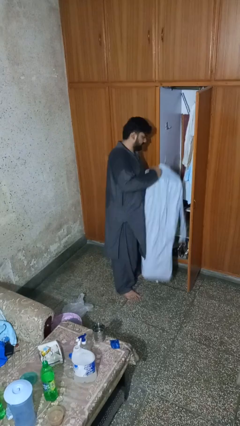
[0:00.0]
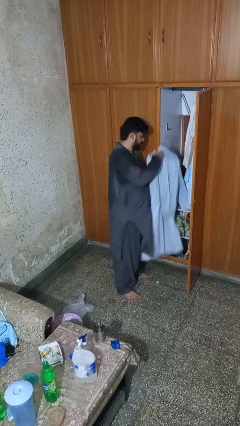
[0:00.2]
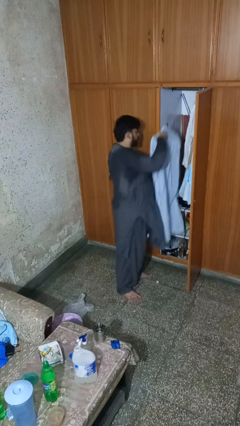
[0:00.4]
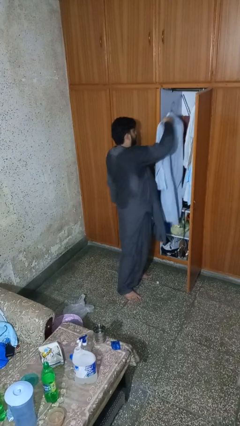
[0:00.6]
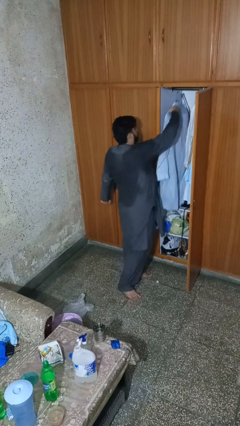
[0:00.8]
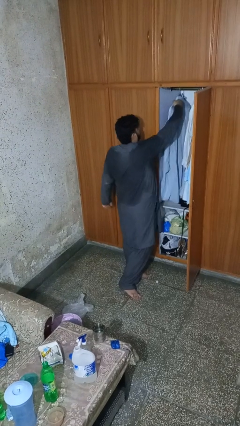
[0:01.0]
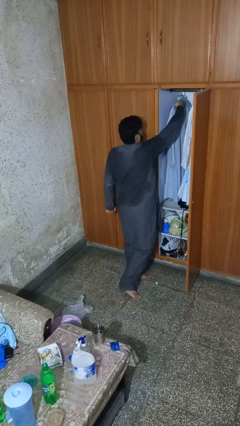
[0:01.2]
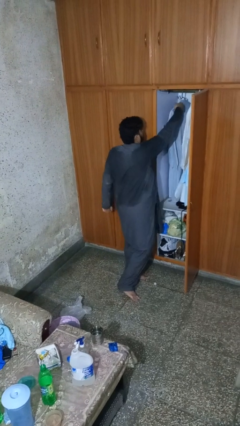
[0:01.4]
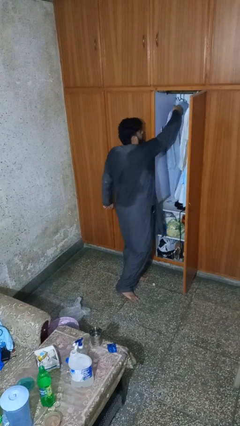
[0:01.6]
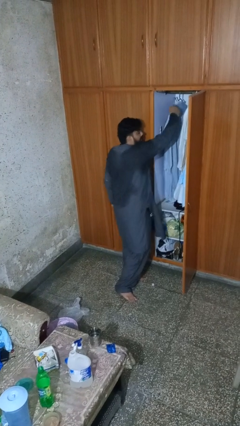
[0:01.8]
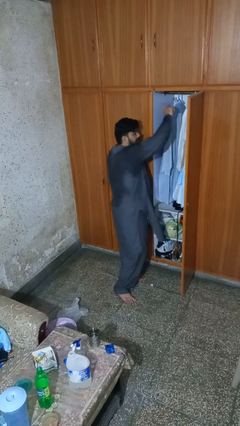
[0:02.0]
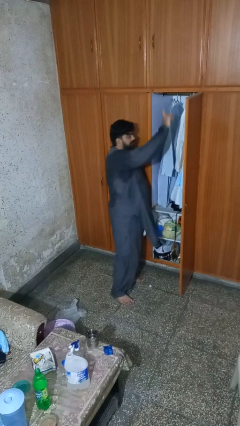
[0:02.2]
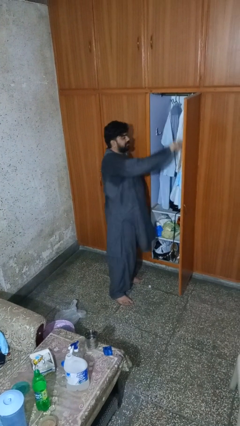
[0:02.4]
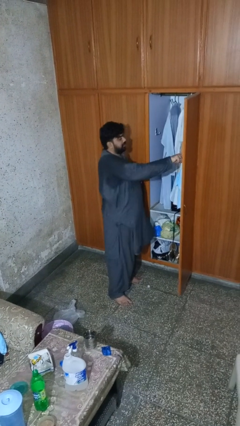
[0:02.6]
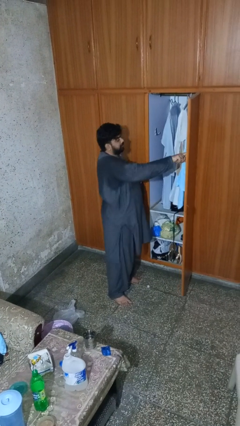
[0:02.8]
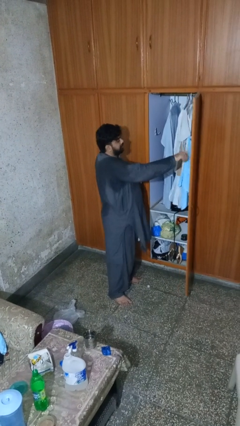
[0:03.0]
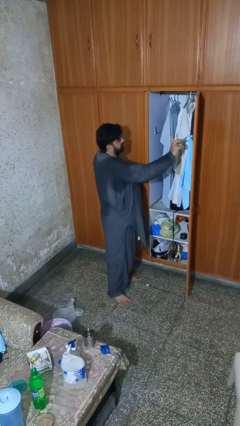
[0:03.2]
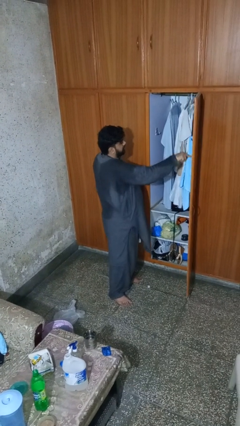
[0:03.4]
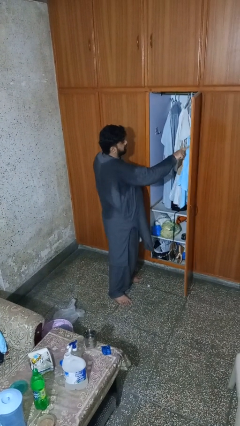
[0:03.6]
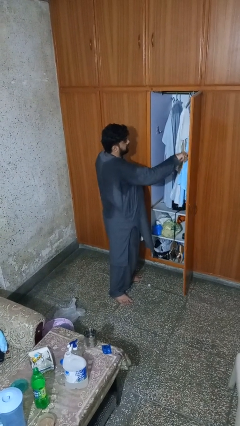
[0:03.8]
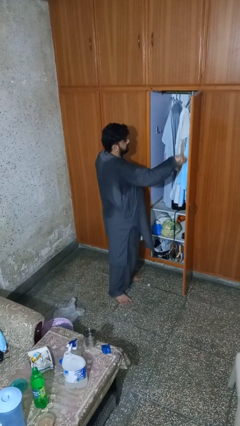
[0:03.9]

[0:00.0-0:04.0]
person puts clothes into closet

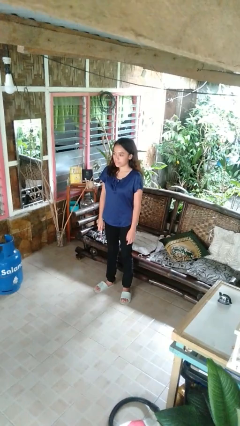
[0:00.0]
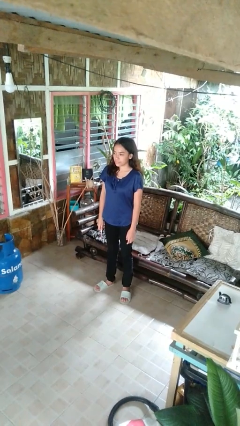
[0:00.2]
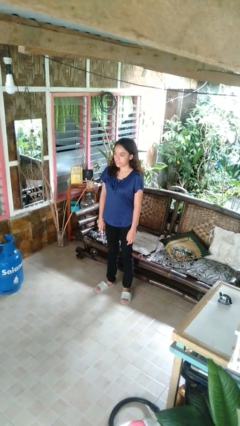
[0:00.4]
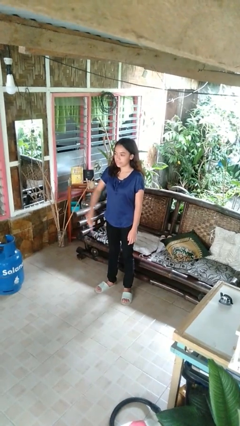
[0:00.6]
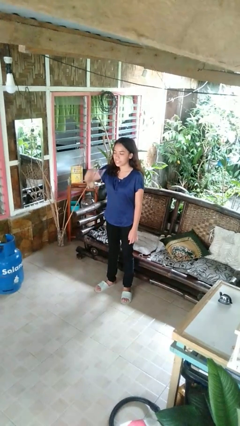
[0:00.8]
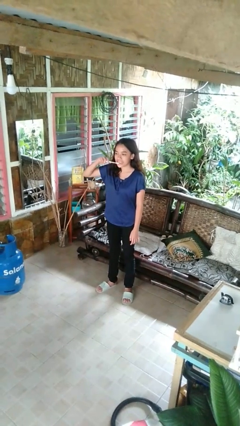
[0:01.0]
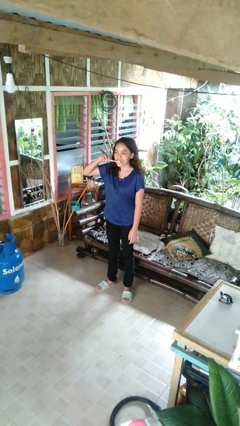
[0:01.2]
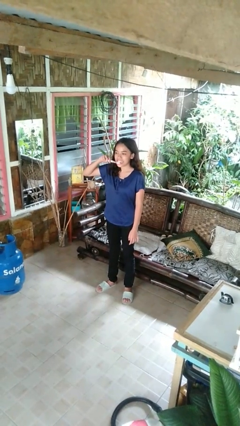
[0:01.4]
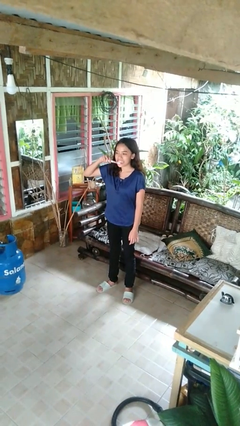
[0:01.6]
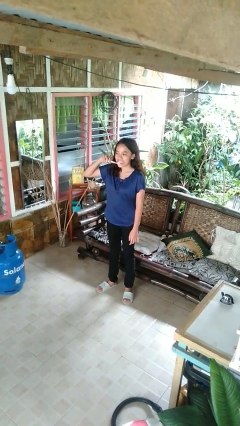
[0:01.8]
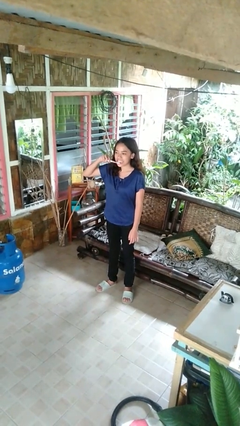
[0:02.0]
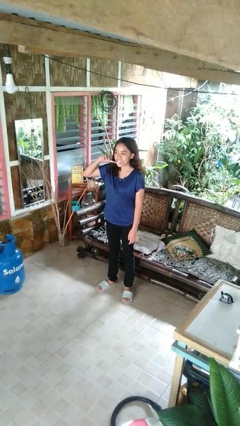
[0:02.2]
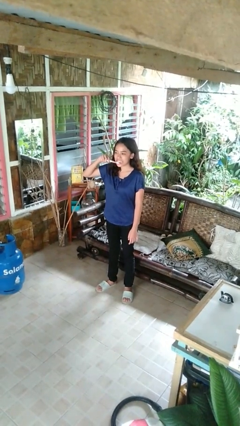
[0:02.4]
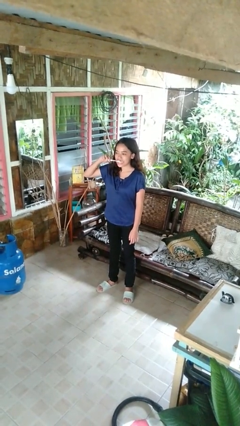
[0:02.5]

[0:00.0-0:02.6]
person brushes teeth

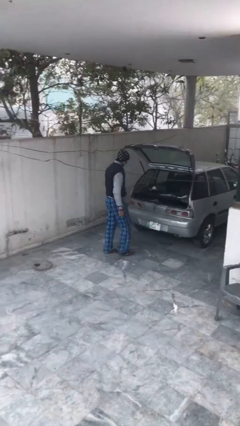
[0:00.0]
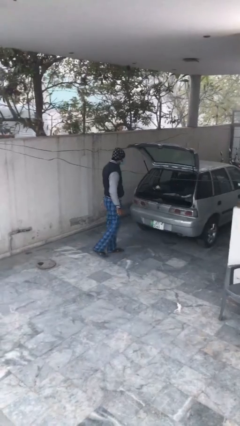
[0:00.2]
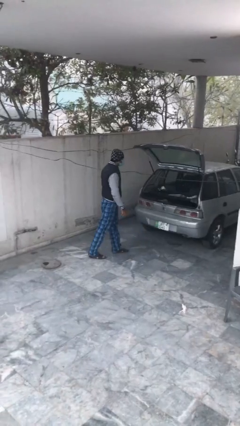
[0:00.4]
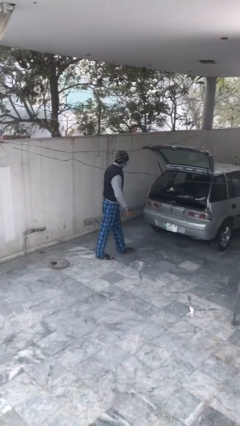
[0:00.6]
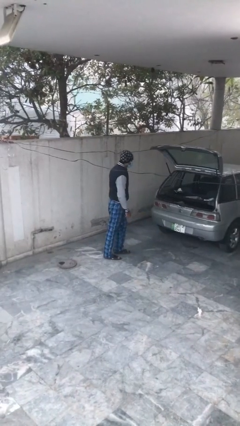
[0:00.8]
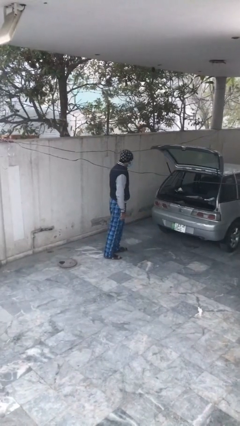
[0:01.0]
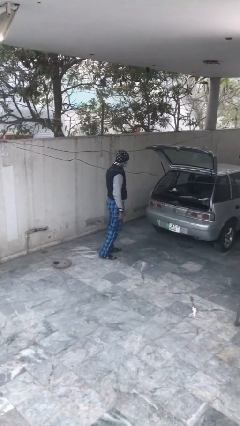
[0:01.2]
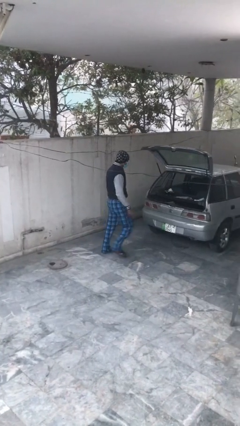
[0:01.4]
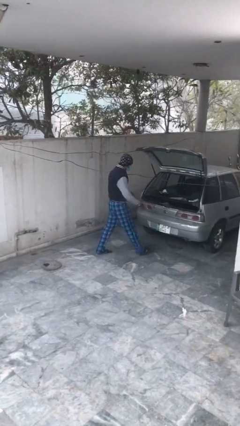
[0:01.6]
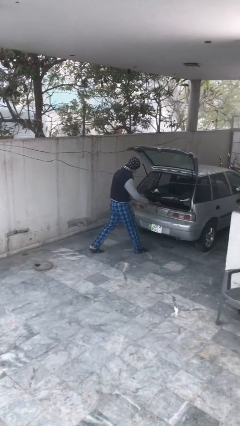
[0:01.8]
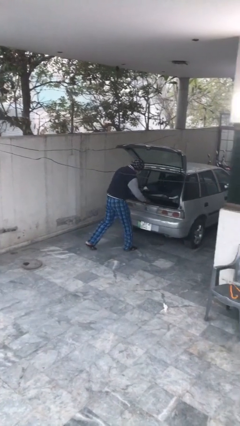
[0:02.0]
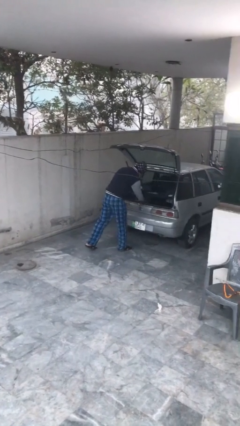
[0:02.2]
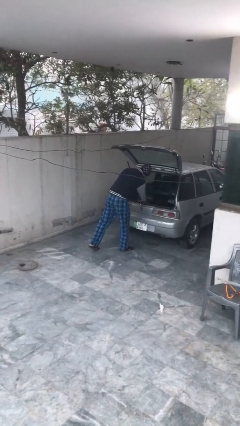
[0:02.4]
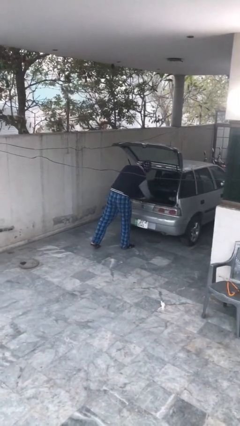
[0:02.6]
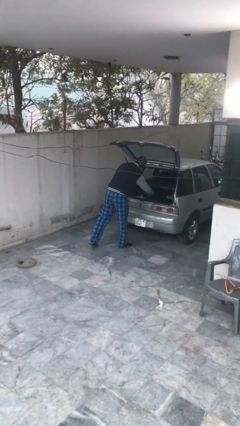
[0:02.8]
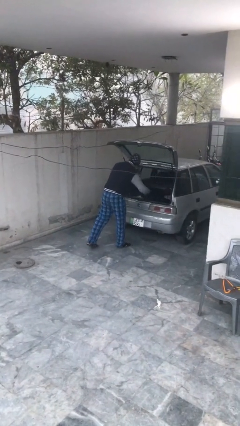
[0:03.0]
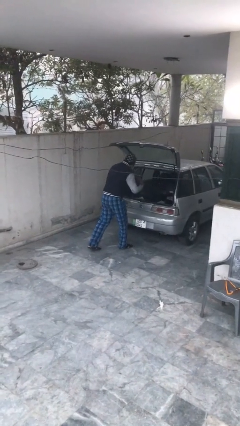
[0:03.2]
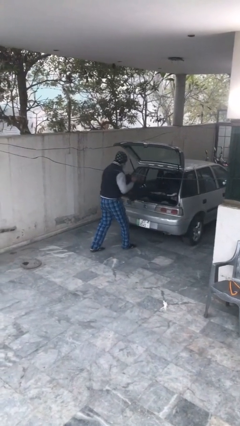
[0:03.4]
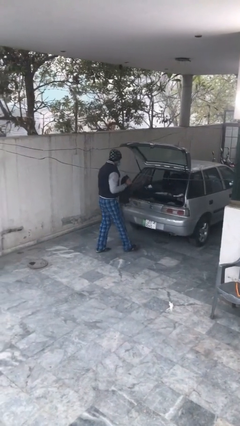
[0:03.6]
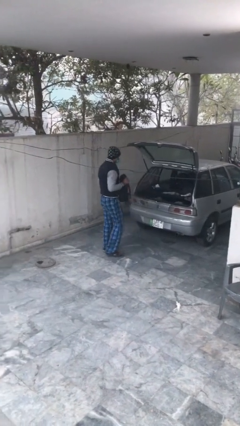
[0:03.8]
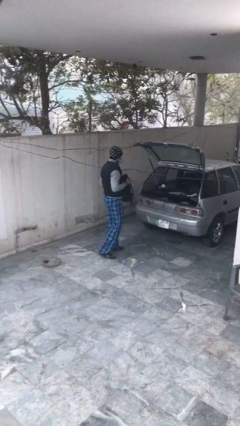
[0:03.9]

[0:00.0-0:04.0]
person unloads car

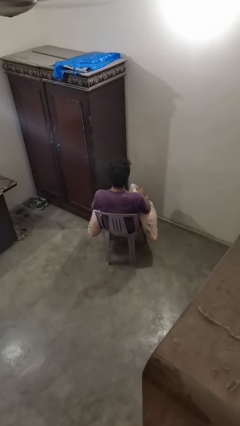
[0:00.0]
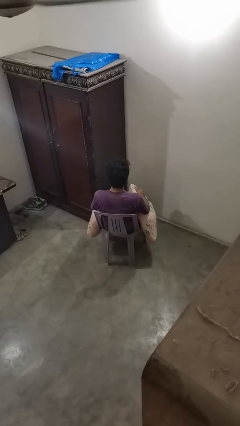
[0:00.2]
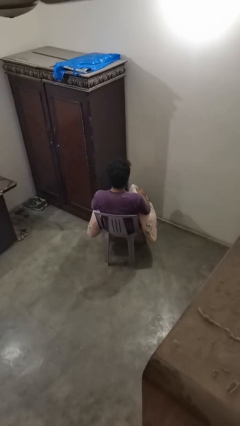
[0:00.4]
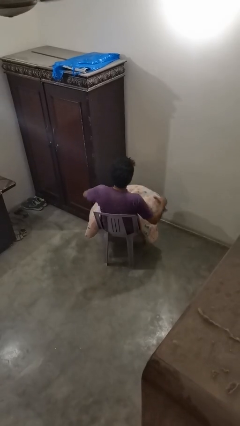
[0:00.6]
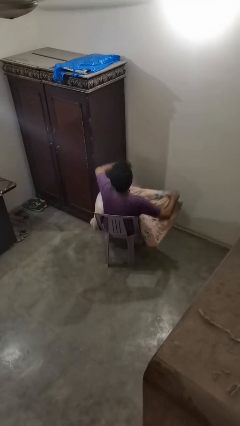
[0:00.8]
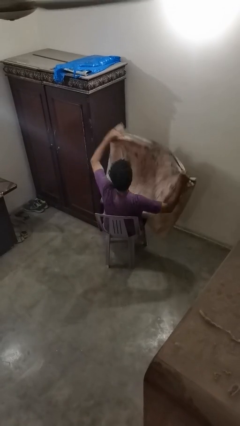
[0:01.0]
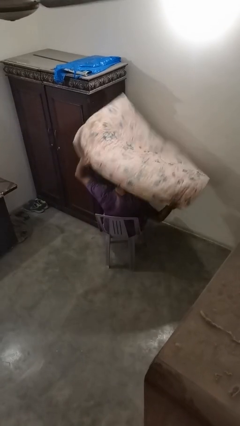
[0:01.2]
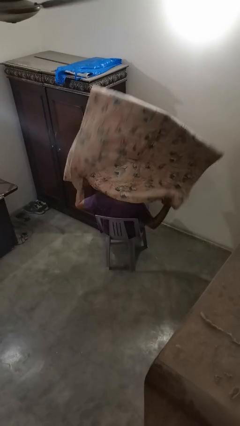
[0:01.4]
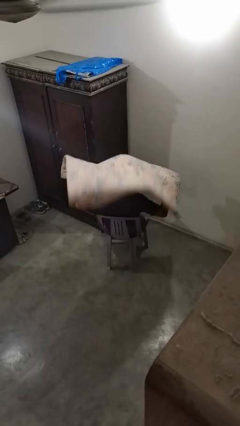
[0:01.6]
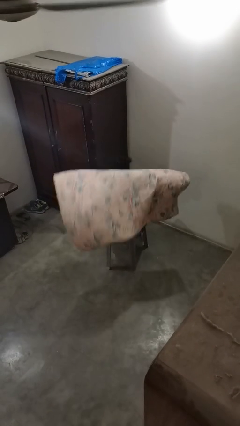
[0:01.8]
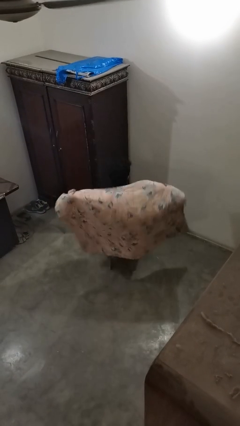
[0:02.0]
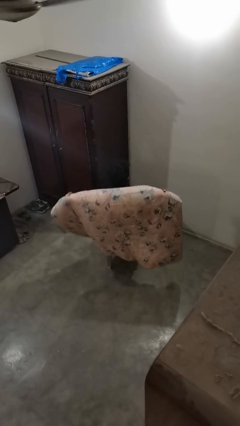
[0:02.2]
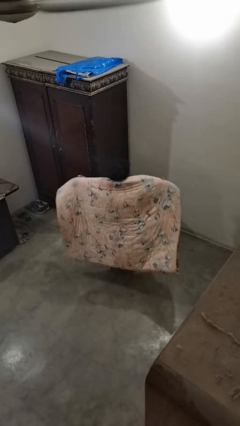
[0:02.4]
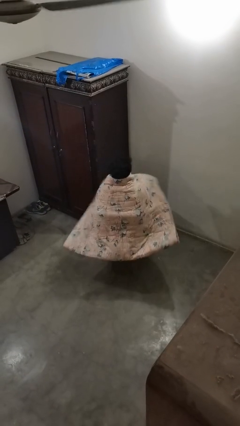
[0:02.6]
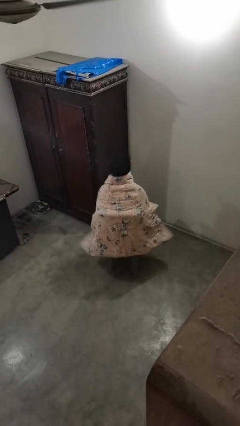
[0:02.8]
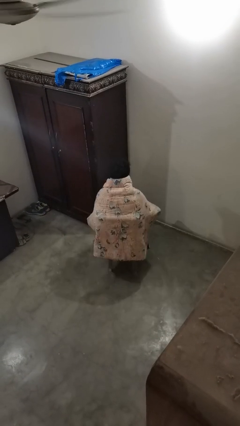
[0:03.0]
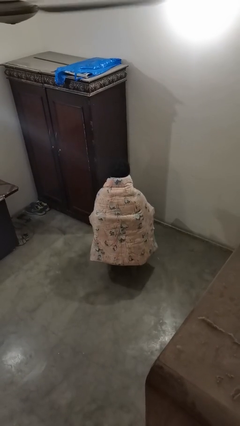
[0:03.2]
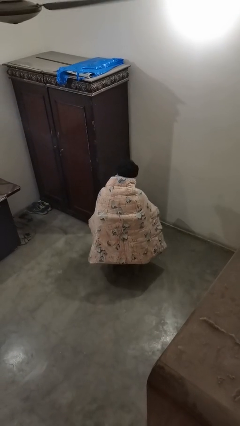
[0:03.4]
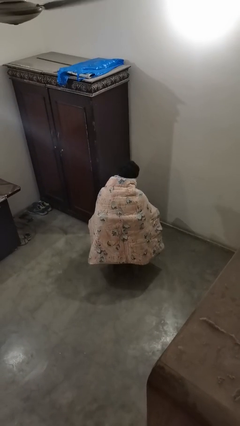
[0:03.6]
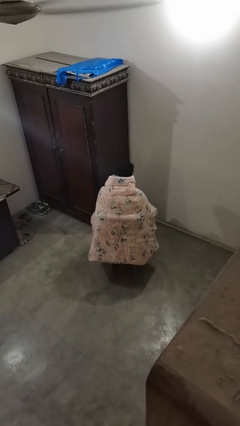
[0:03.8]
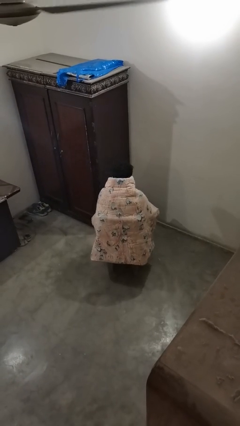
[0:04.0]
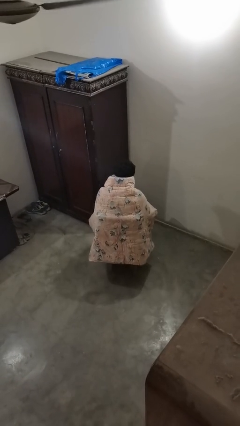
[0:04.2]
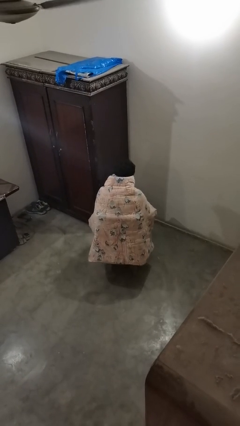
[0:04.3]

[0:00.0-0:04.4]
person covers with blanket

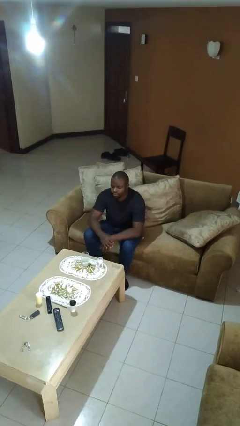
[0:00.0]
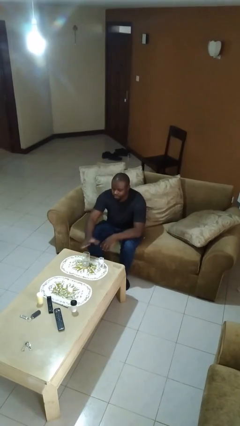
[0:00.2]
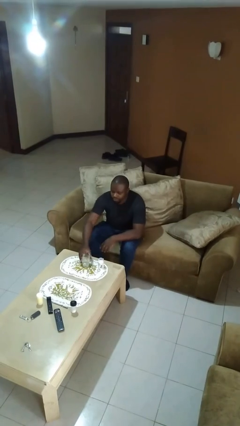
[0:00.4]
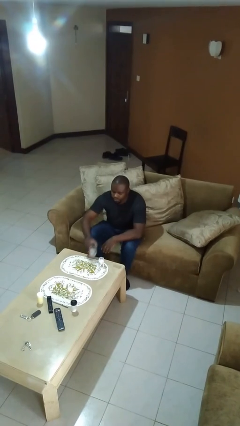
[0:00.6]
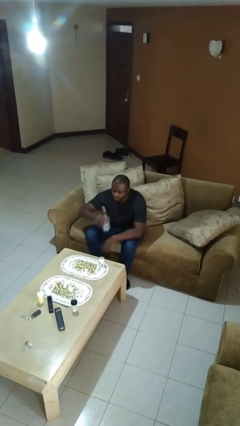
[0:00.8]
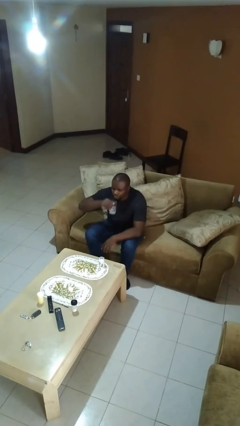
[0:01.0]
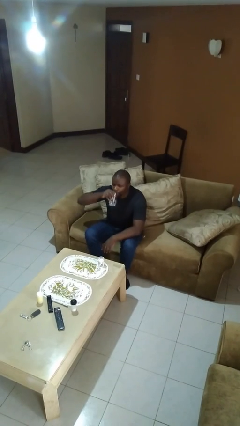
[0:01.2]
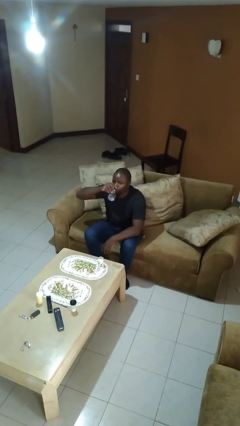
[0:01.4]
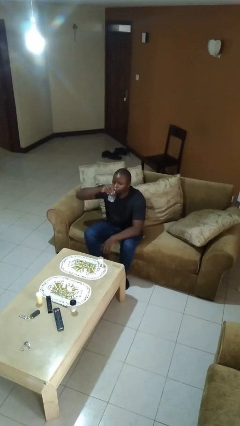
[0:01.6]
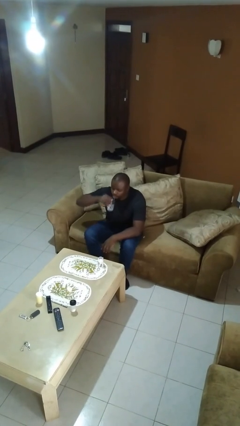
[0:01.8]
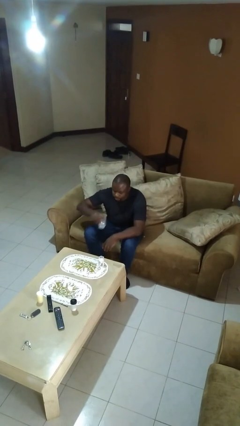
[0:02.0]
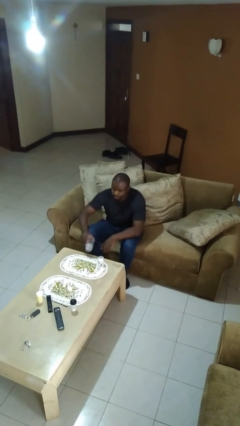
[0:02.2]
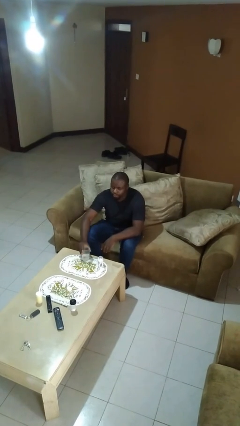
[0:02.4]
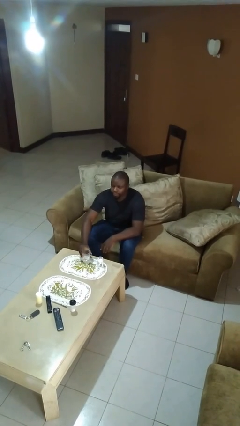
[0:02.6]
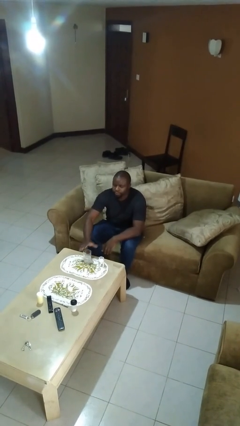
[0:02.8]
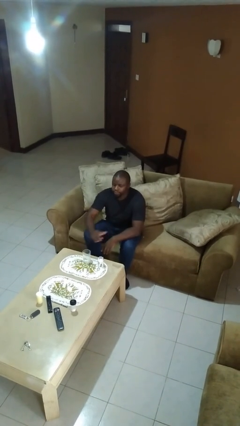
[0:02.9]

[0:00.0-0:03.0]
person drinks from cup
